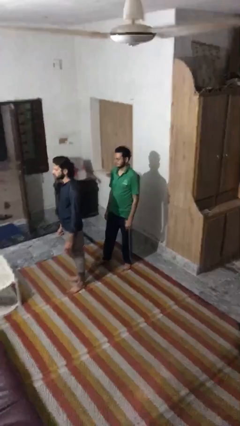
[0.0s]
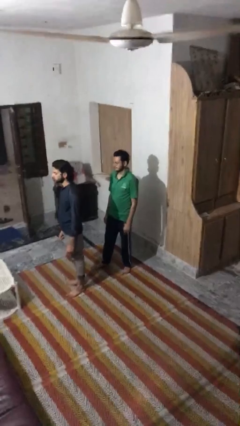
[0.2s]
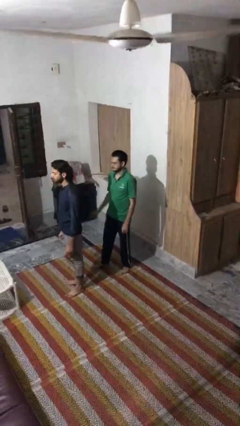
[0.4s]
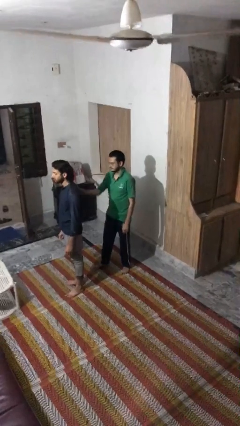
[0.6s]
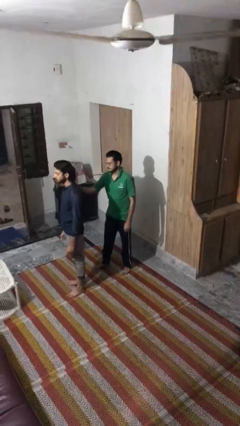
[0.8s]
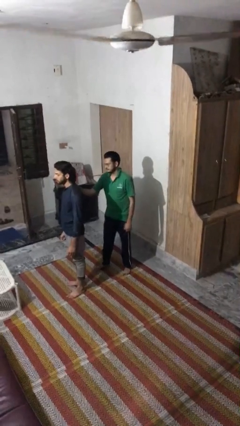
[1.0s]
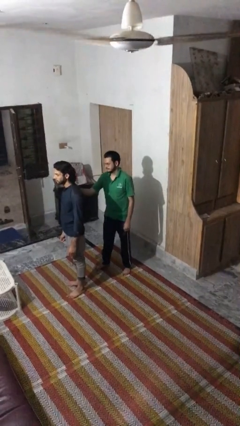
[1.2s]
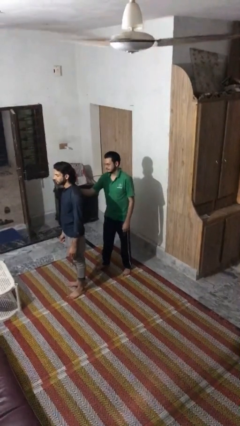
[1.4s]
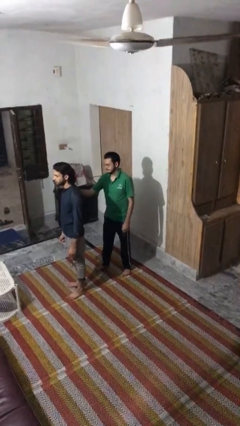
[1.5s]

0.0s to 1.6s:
person grabs person by shoulder

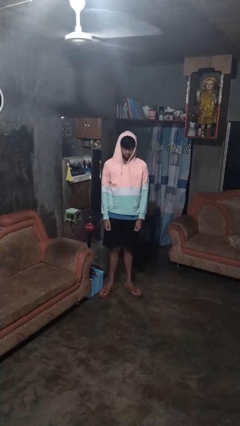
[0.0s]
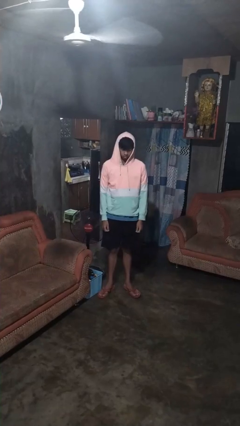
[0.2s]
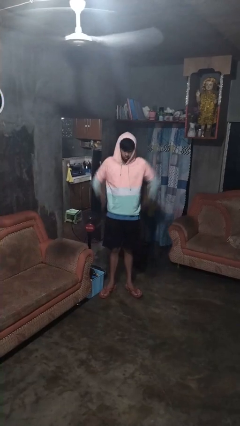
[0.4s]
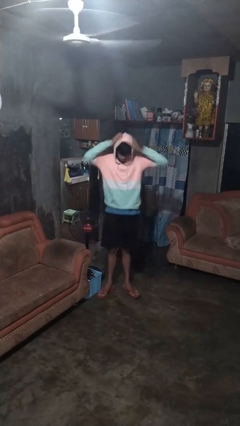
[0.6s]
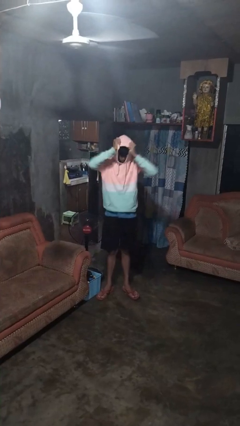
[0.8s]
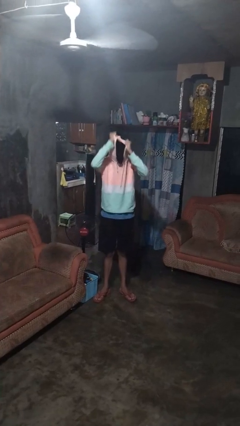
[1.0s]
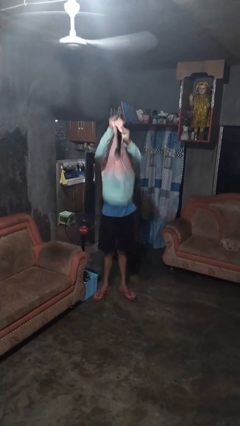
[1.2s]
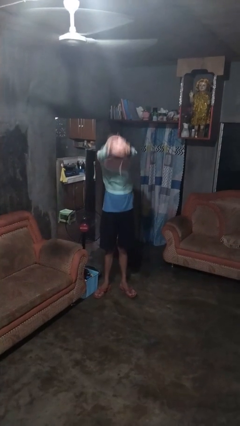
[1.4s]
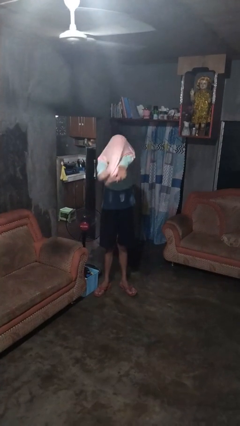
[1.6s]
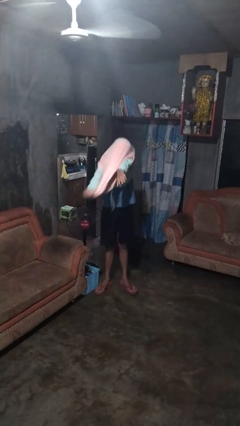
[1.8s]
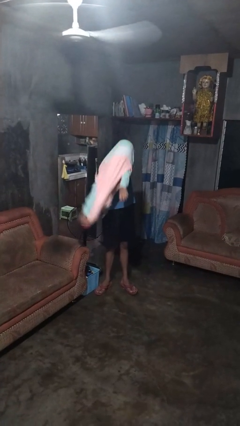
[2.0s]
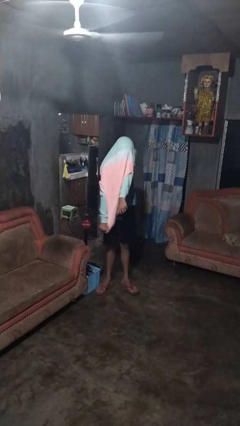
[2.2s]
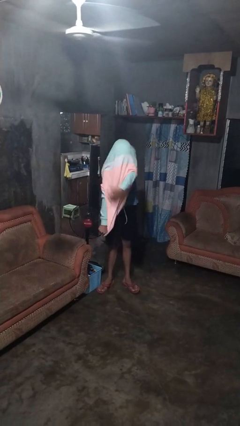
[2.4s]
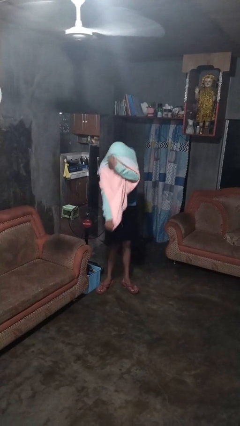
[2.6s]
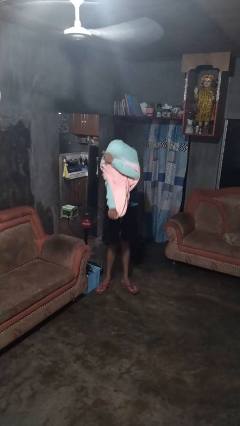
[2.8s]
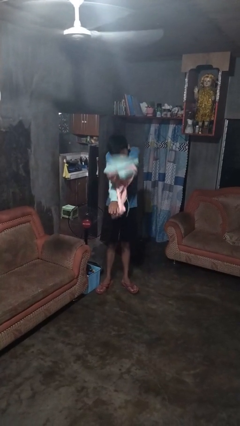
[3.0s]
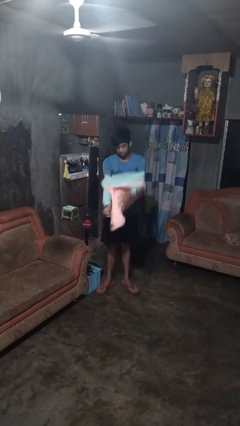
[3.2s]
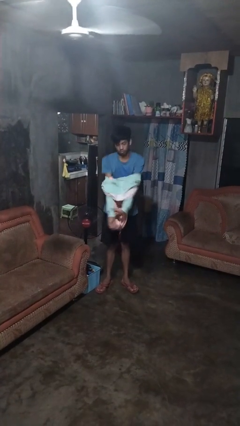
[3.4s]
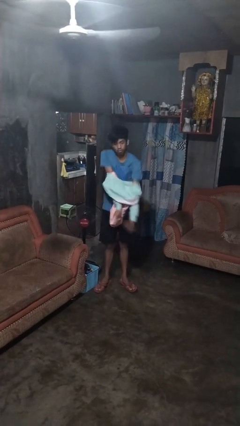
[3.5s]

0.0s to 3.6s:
person takes off hoodie

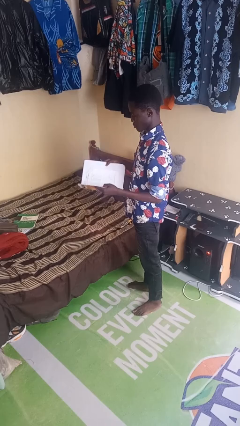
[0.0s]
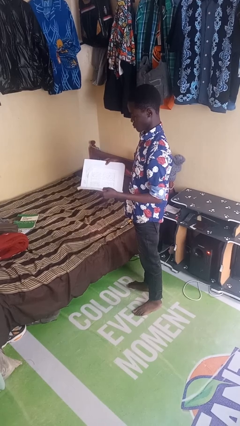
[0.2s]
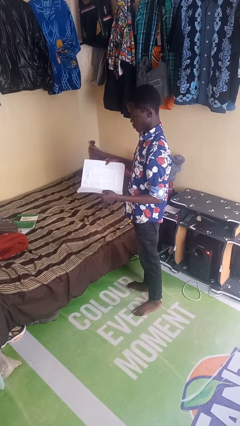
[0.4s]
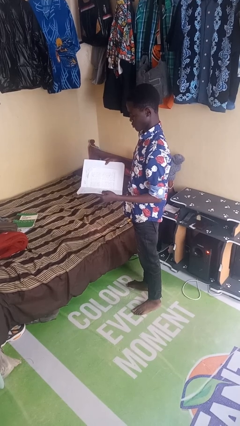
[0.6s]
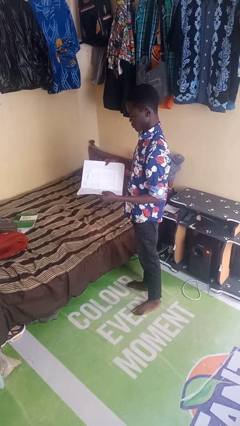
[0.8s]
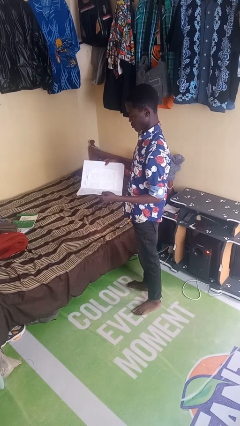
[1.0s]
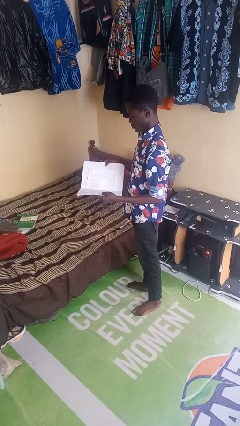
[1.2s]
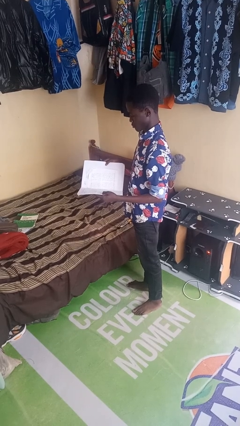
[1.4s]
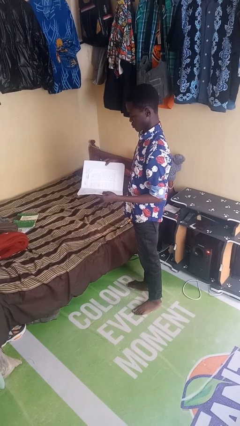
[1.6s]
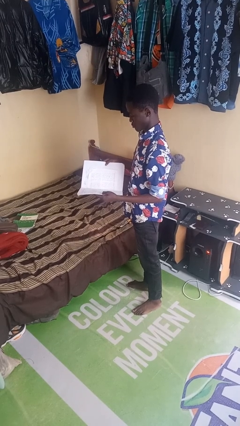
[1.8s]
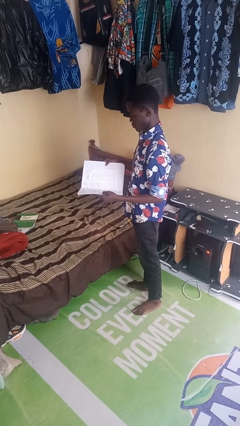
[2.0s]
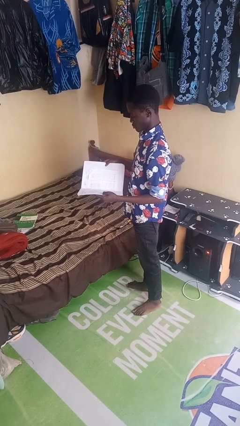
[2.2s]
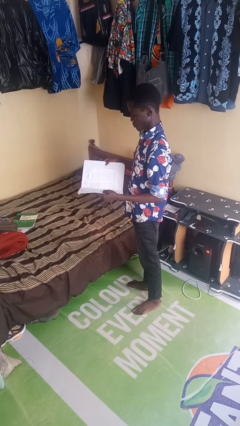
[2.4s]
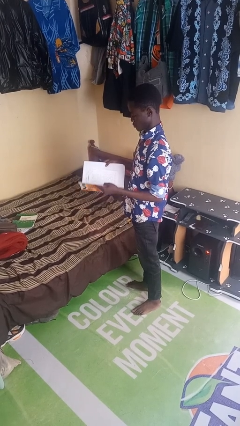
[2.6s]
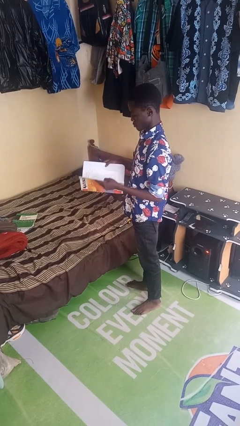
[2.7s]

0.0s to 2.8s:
person reads book

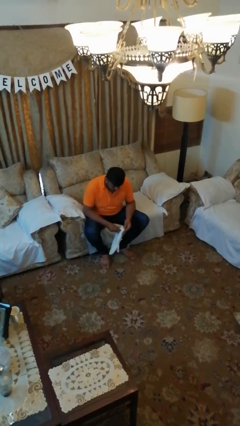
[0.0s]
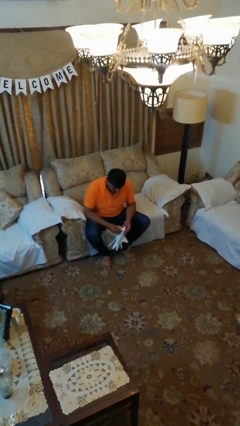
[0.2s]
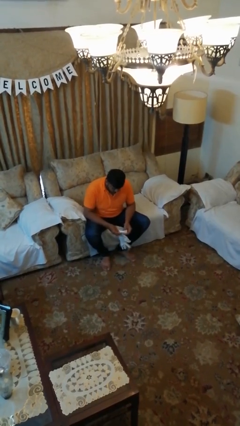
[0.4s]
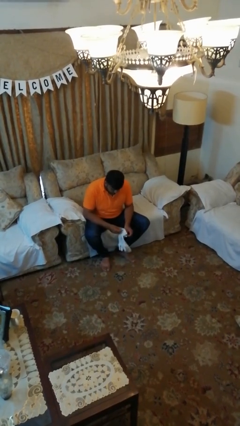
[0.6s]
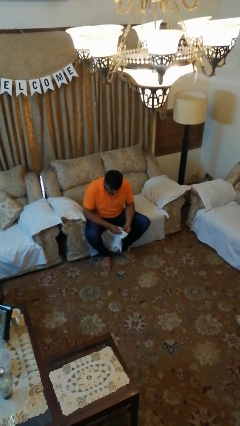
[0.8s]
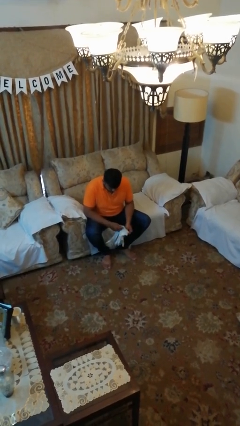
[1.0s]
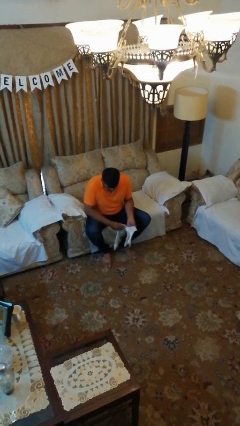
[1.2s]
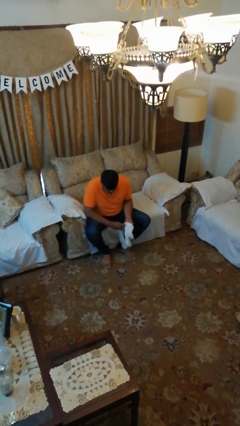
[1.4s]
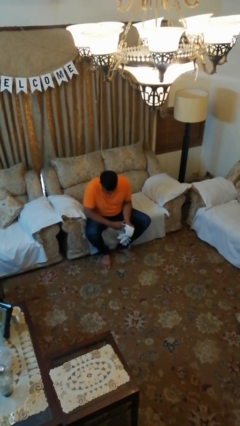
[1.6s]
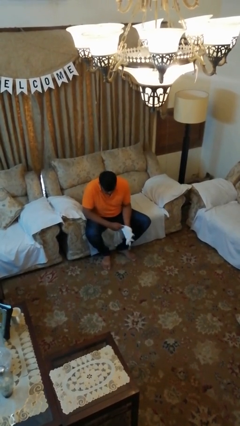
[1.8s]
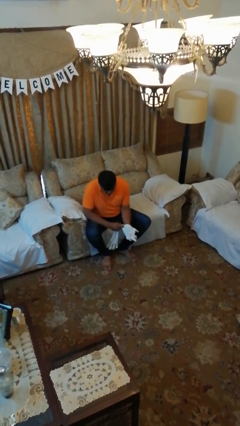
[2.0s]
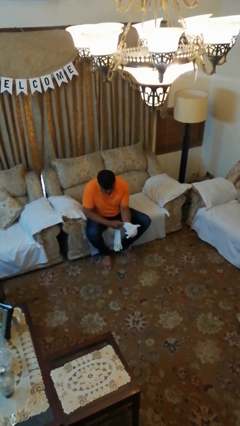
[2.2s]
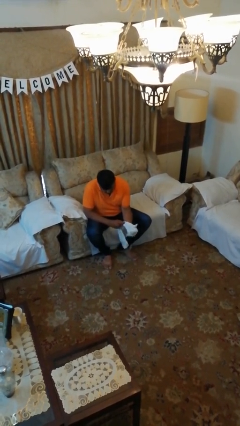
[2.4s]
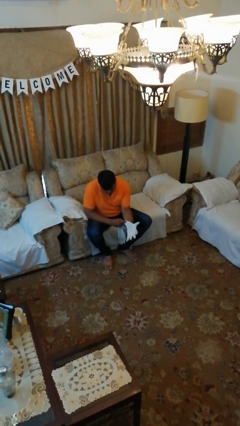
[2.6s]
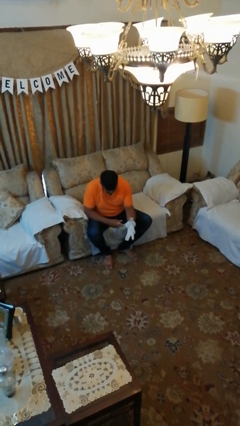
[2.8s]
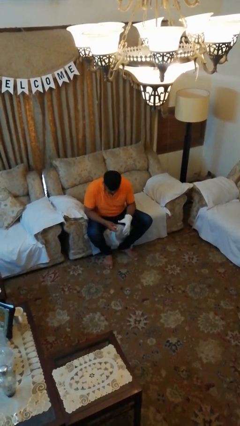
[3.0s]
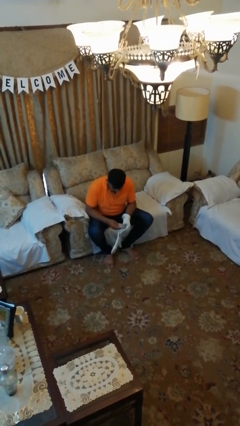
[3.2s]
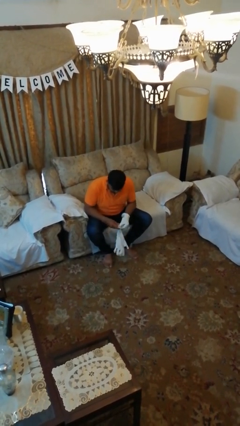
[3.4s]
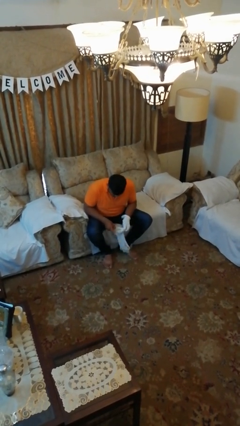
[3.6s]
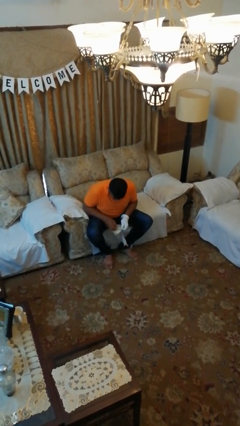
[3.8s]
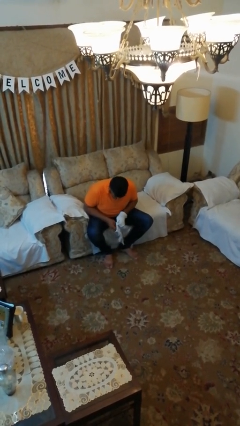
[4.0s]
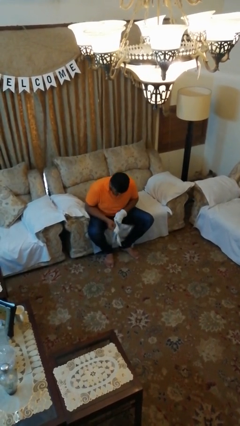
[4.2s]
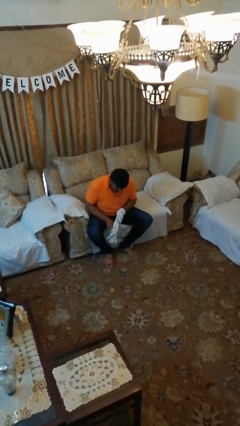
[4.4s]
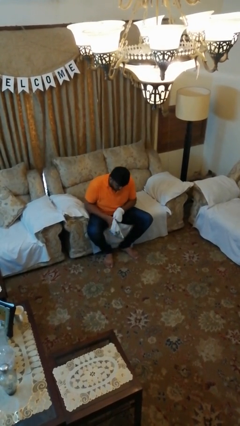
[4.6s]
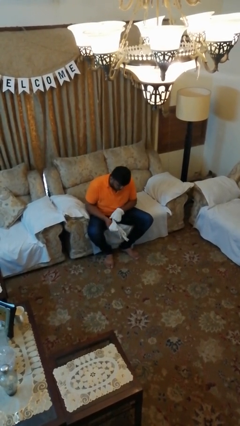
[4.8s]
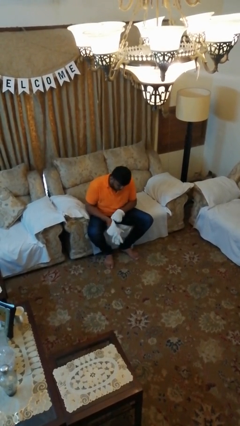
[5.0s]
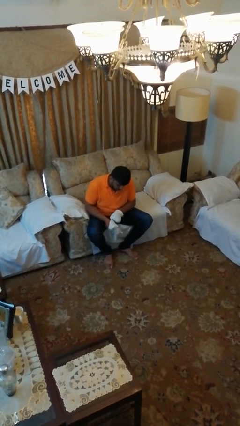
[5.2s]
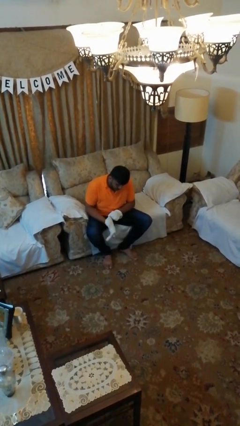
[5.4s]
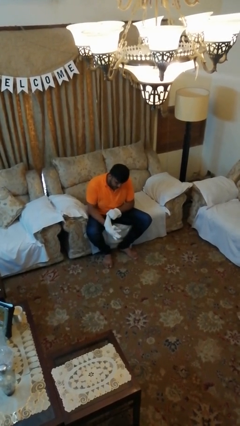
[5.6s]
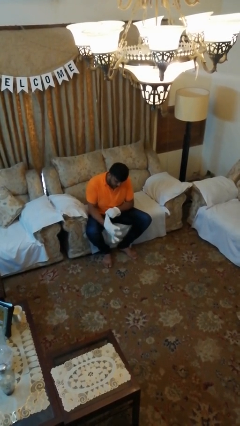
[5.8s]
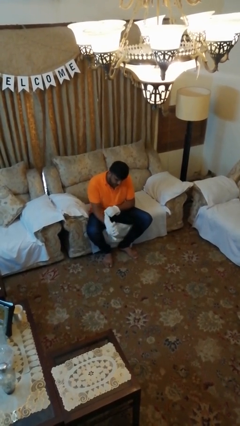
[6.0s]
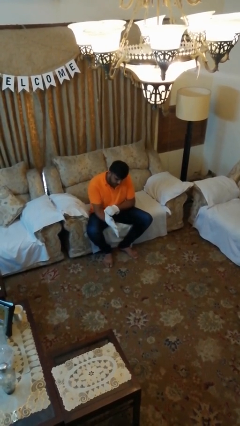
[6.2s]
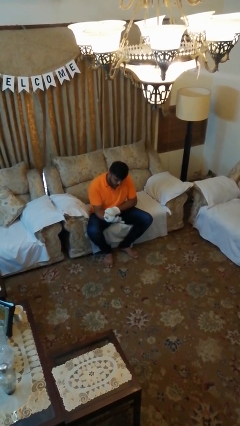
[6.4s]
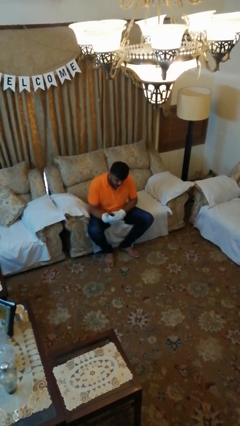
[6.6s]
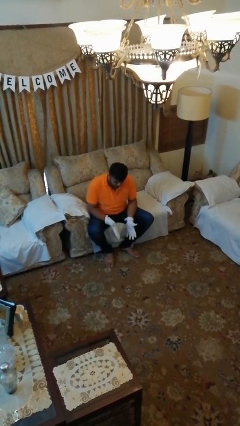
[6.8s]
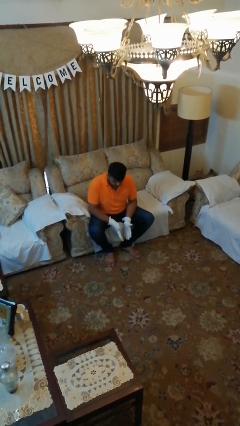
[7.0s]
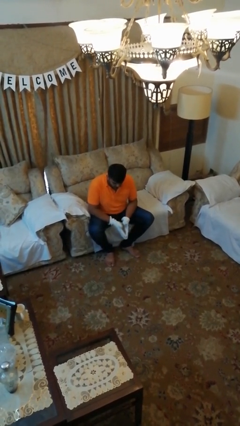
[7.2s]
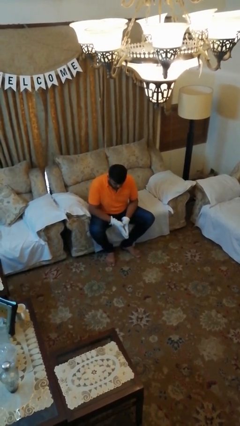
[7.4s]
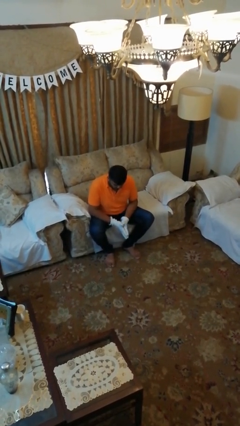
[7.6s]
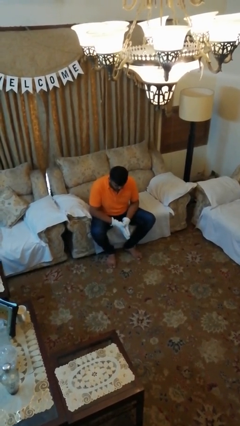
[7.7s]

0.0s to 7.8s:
person puts on gloves

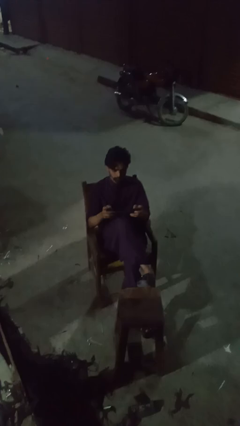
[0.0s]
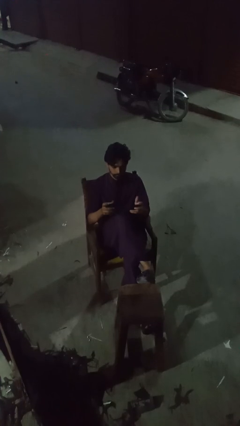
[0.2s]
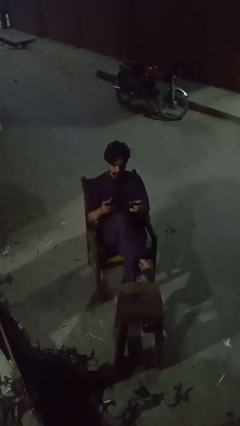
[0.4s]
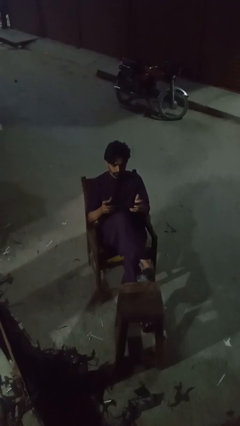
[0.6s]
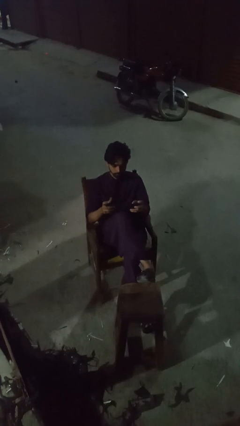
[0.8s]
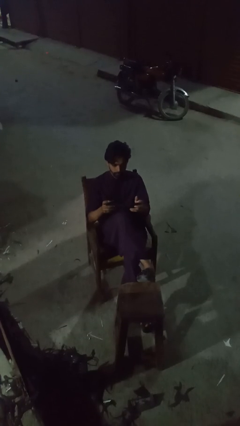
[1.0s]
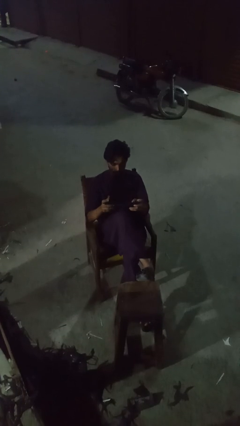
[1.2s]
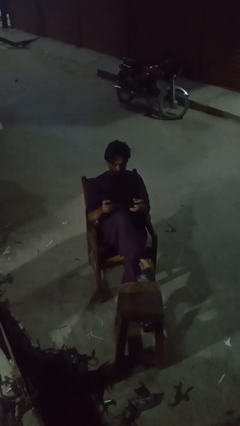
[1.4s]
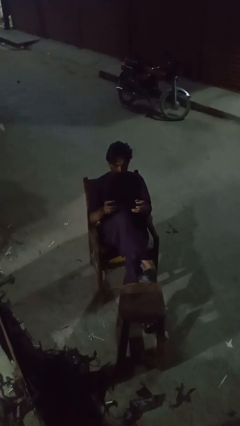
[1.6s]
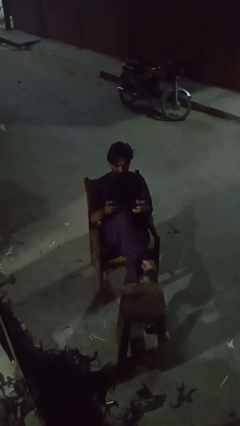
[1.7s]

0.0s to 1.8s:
person interacts with handheld game
